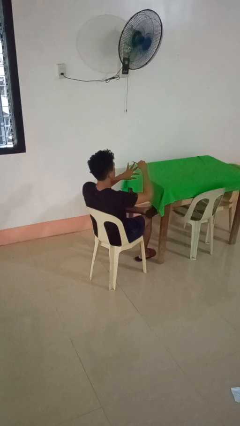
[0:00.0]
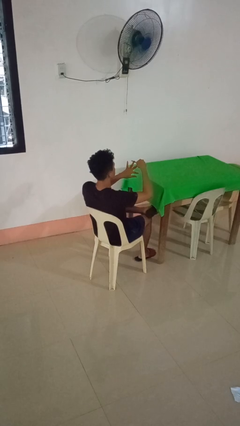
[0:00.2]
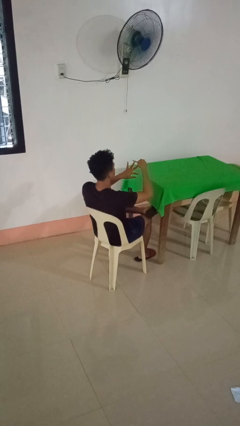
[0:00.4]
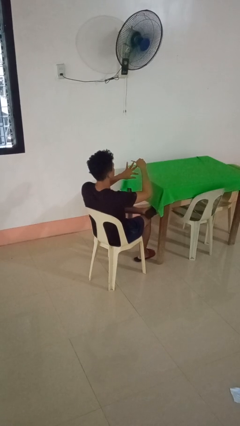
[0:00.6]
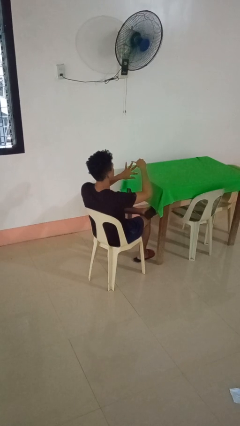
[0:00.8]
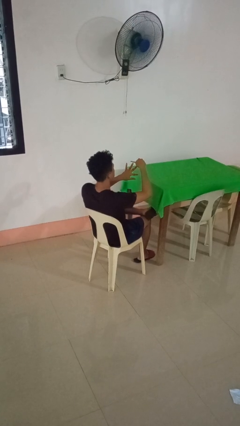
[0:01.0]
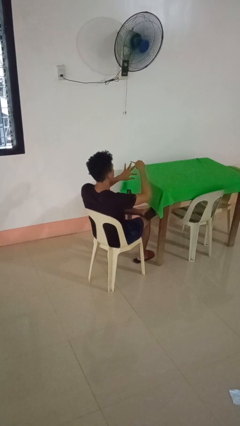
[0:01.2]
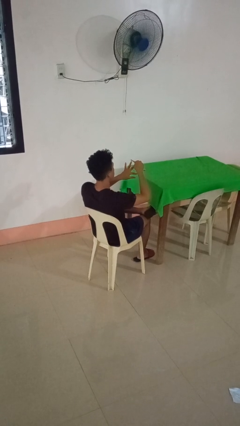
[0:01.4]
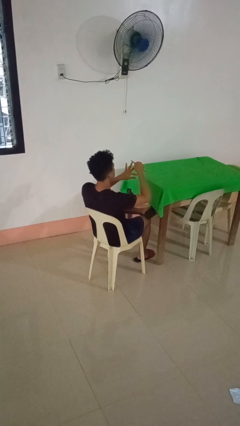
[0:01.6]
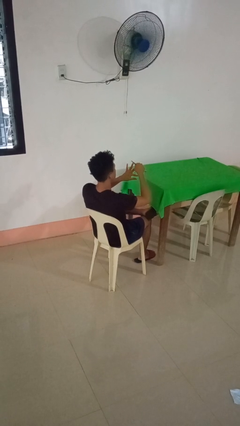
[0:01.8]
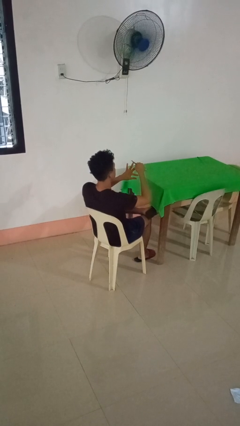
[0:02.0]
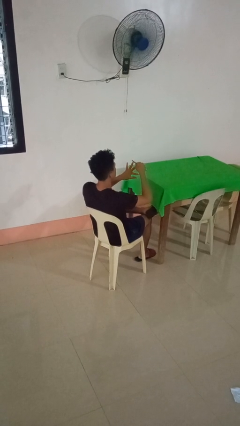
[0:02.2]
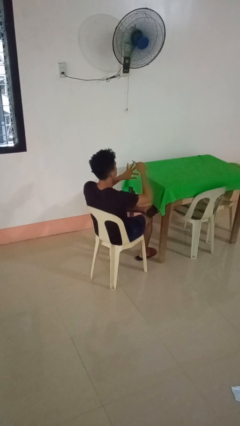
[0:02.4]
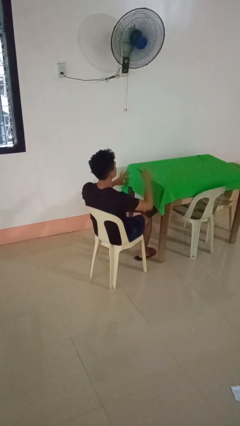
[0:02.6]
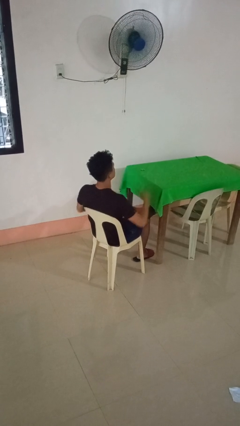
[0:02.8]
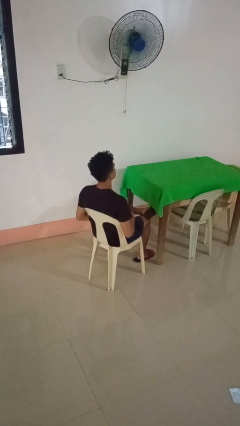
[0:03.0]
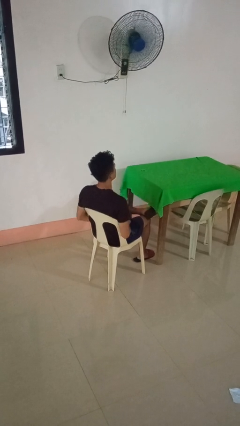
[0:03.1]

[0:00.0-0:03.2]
person files fingernails

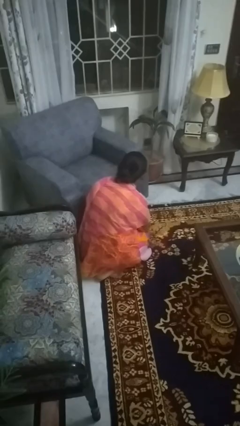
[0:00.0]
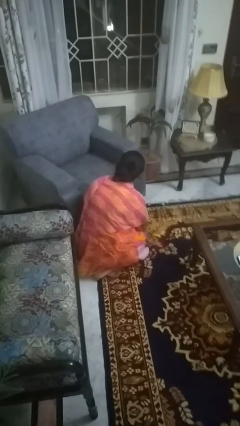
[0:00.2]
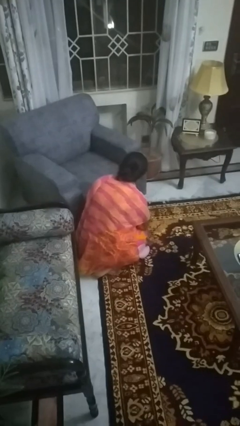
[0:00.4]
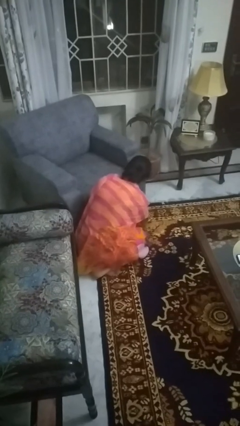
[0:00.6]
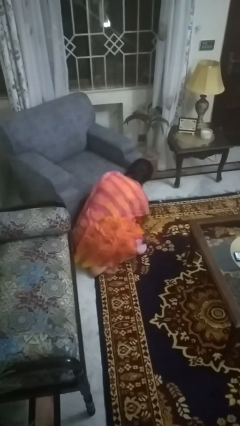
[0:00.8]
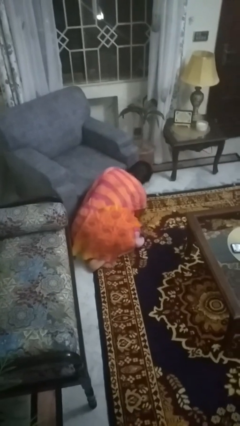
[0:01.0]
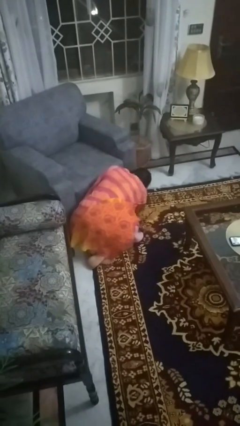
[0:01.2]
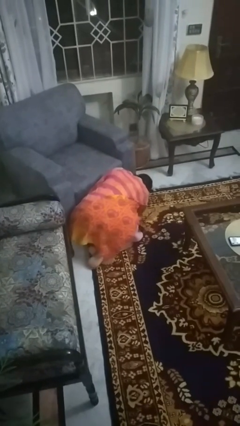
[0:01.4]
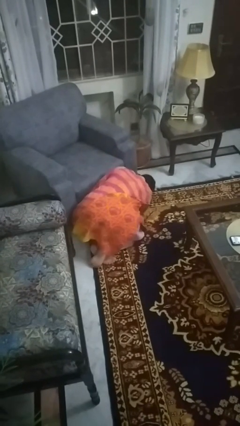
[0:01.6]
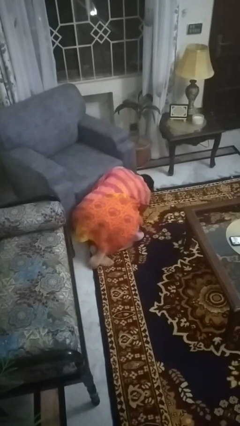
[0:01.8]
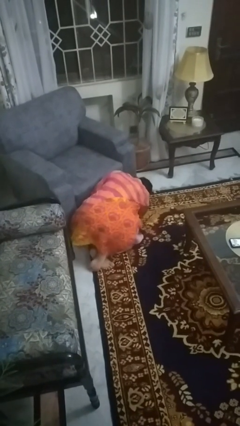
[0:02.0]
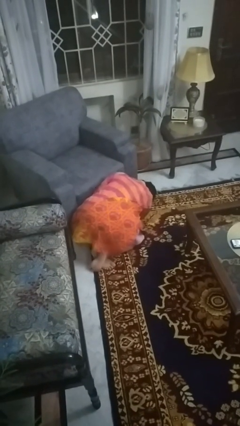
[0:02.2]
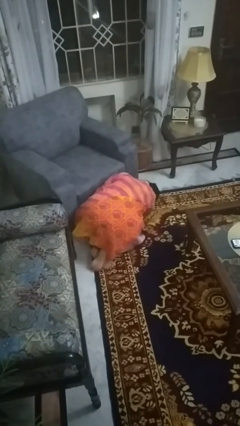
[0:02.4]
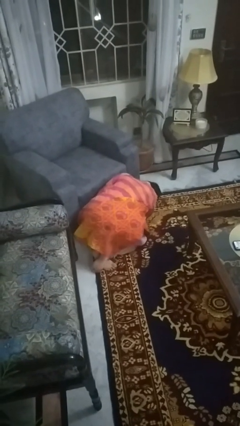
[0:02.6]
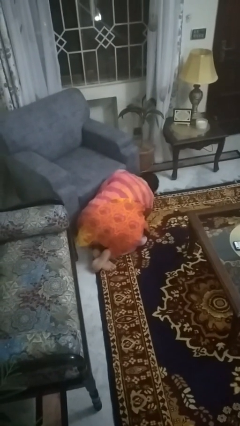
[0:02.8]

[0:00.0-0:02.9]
person searches under couch

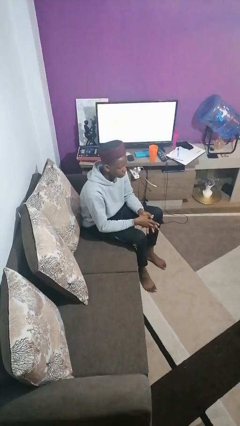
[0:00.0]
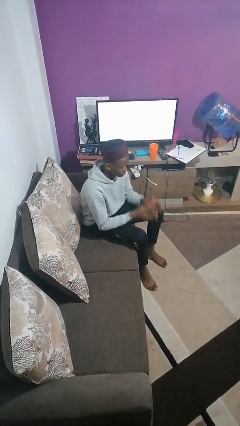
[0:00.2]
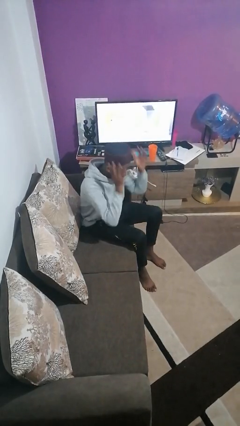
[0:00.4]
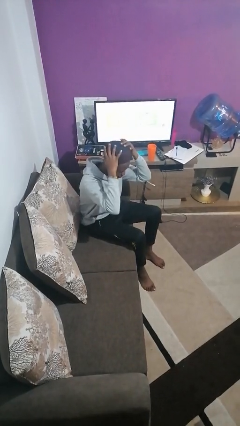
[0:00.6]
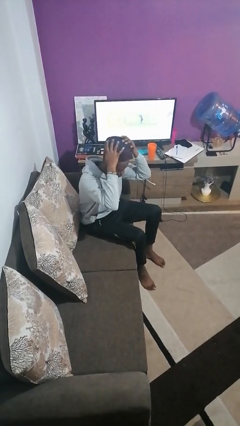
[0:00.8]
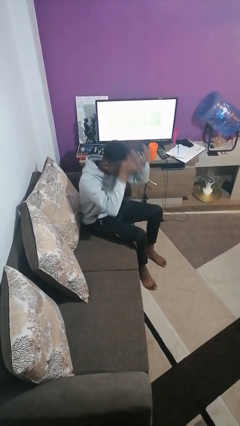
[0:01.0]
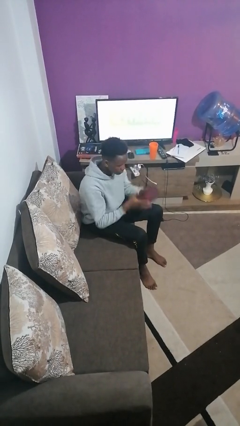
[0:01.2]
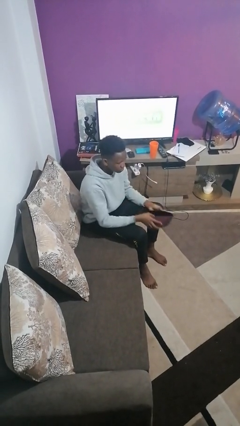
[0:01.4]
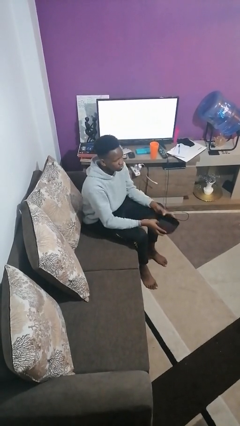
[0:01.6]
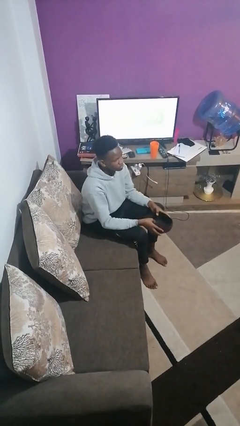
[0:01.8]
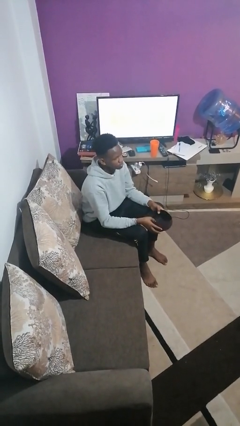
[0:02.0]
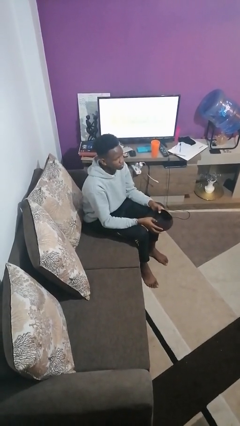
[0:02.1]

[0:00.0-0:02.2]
person takes off hat

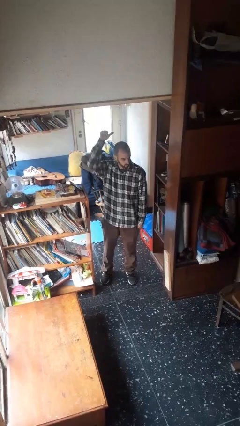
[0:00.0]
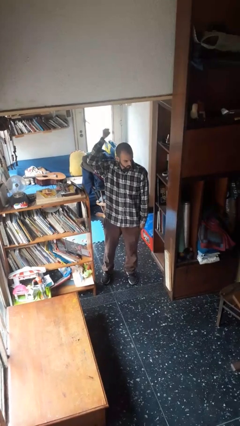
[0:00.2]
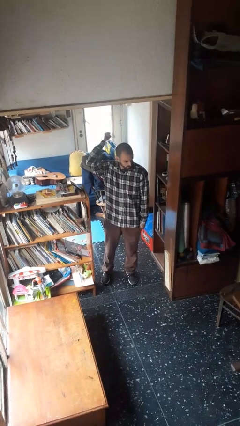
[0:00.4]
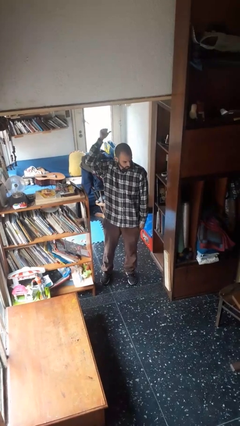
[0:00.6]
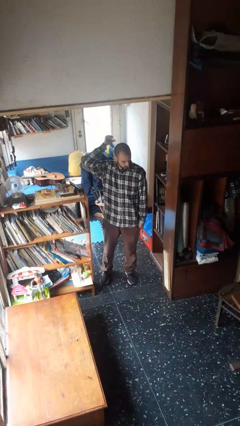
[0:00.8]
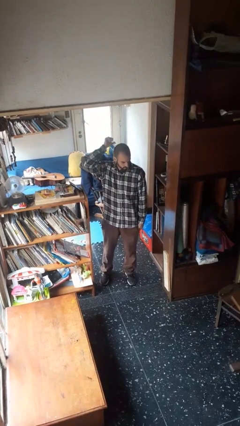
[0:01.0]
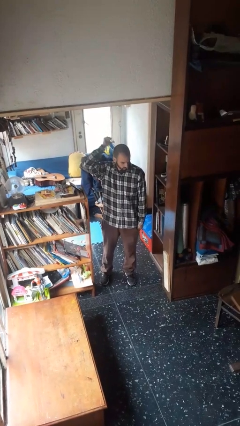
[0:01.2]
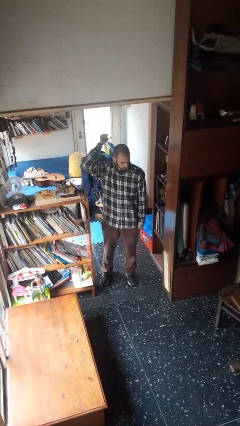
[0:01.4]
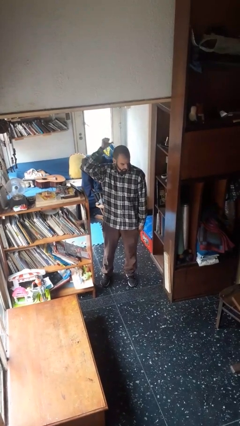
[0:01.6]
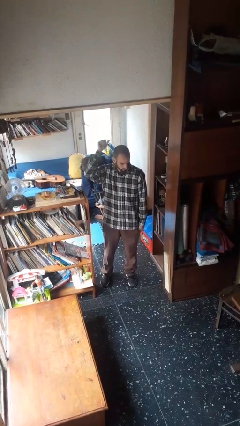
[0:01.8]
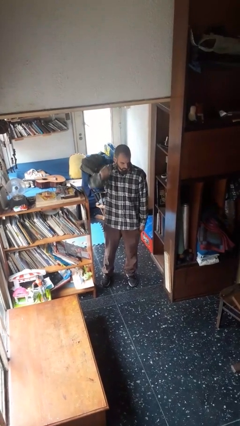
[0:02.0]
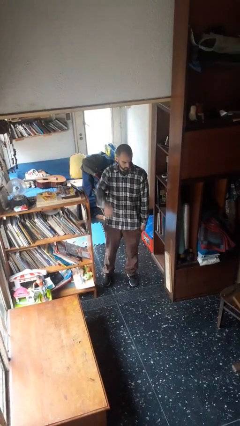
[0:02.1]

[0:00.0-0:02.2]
person gestures behind me

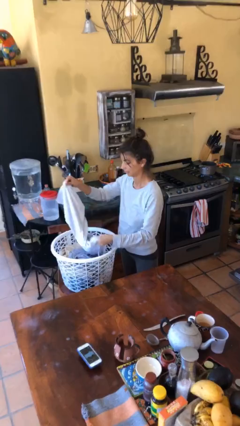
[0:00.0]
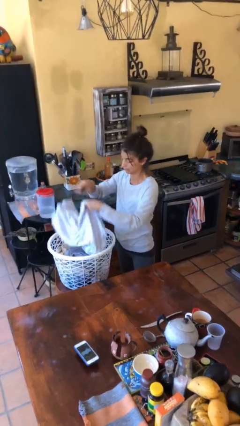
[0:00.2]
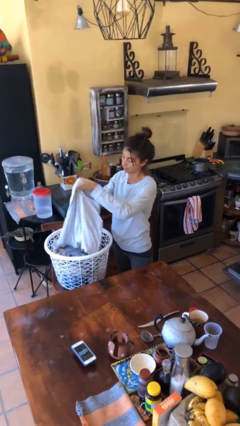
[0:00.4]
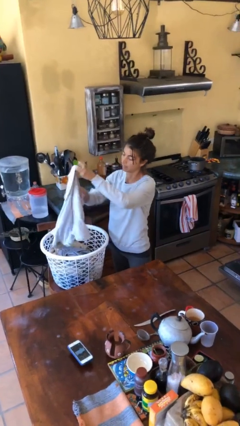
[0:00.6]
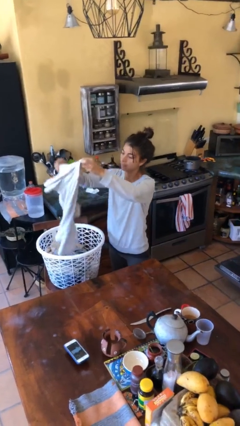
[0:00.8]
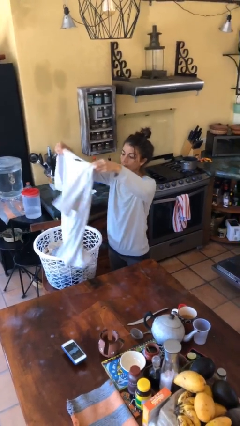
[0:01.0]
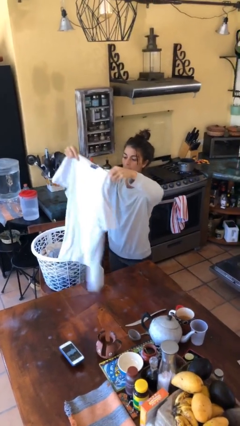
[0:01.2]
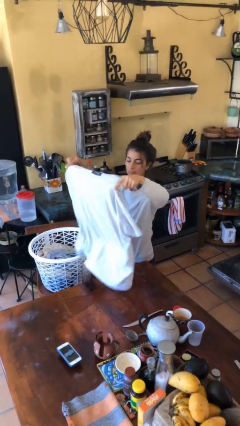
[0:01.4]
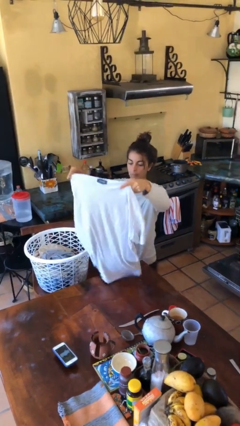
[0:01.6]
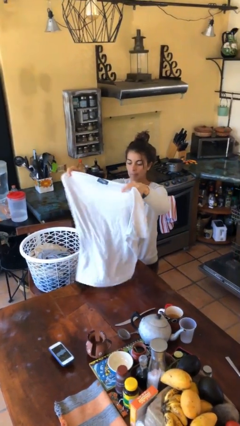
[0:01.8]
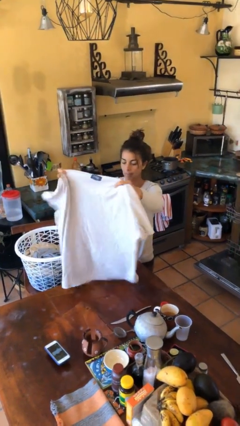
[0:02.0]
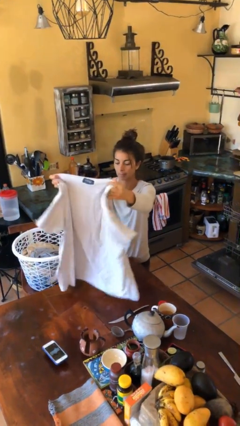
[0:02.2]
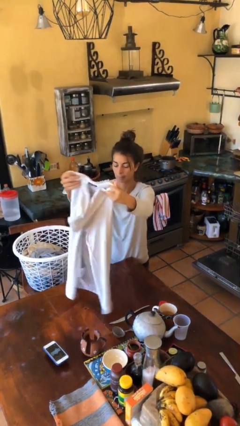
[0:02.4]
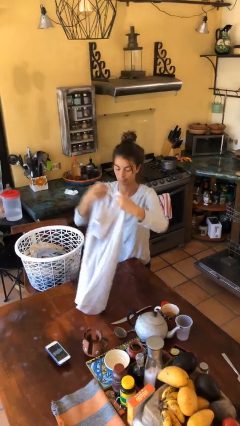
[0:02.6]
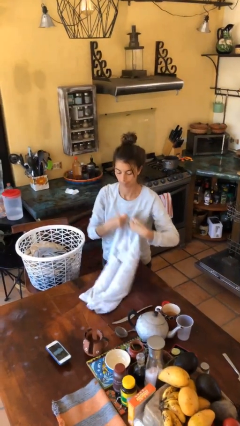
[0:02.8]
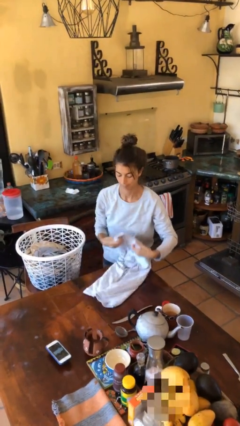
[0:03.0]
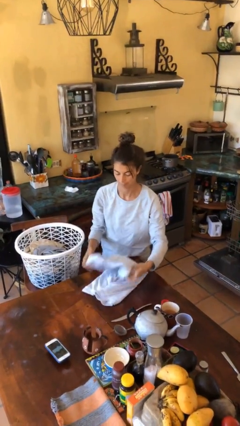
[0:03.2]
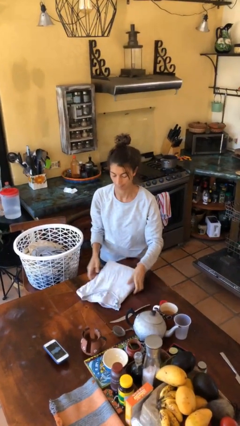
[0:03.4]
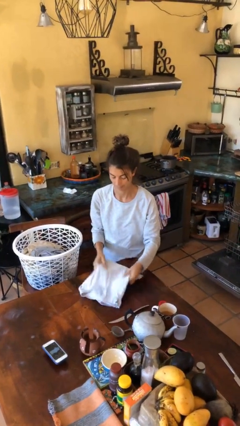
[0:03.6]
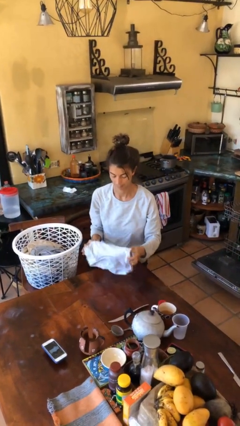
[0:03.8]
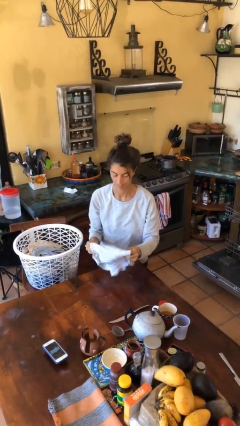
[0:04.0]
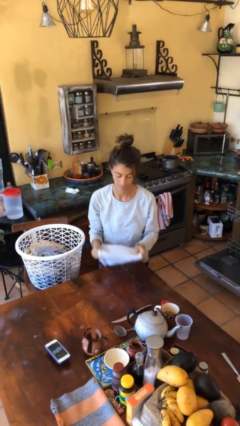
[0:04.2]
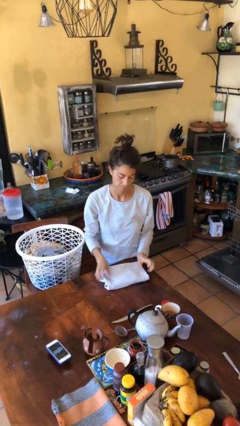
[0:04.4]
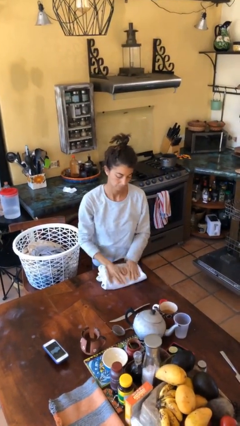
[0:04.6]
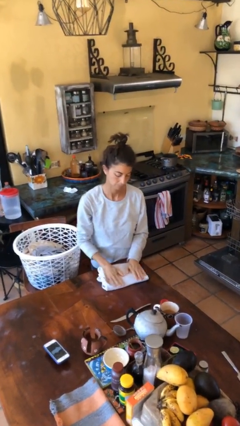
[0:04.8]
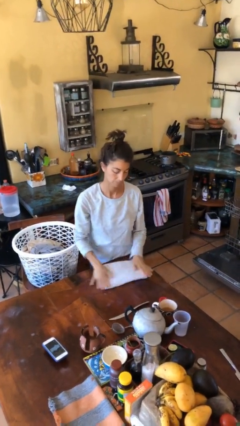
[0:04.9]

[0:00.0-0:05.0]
person folds shirt

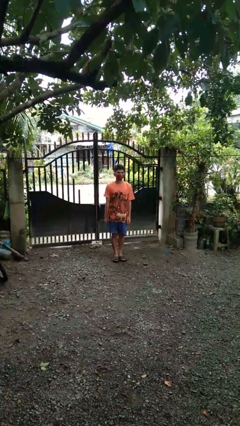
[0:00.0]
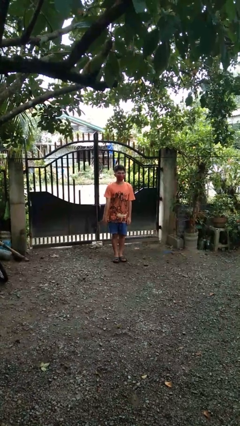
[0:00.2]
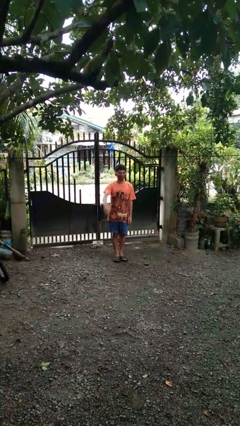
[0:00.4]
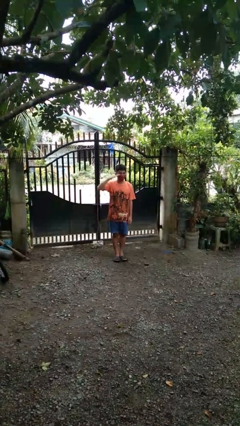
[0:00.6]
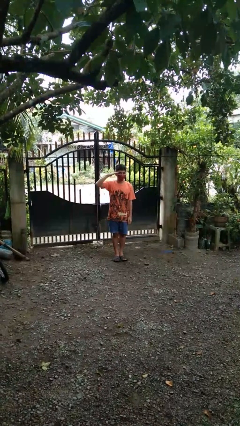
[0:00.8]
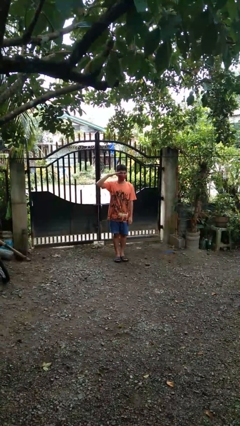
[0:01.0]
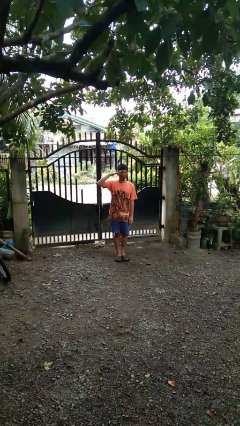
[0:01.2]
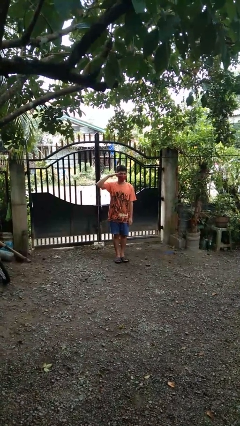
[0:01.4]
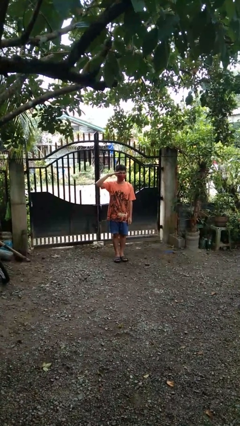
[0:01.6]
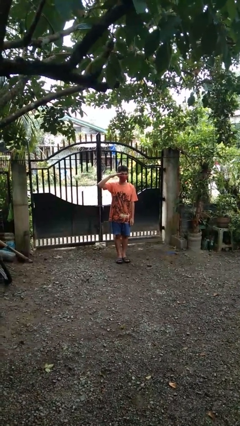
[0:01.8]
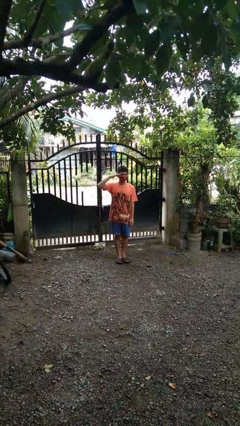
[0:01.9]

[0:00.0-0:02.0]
person salutes

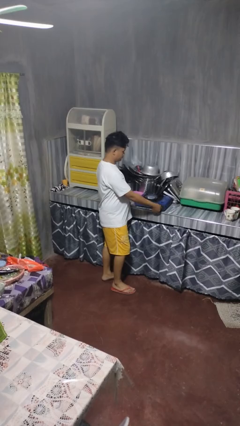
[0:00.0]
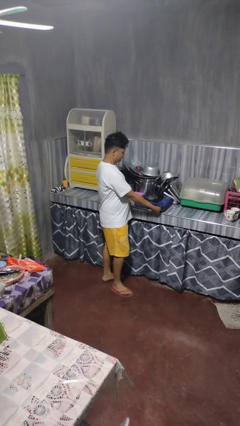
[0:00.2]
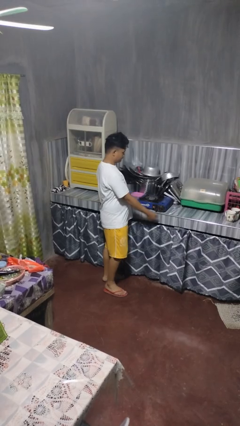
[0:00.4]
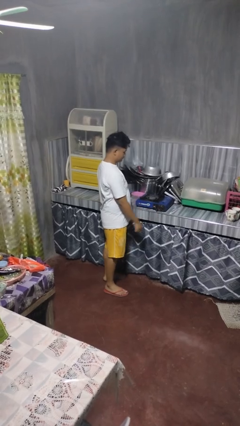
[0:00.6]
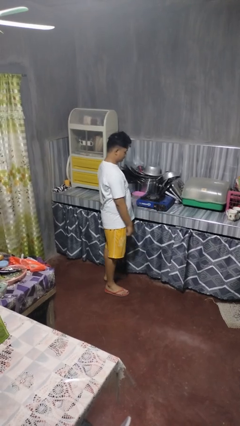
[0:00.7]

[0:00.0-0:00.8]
person turns off stovetop
